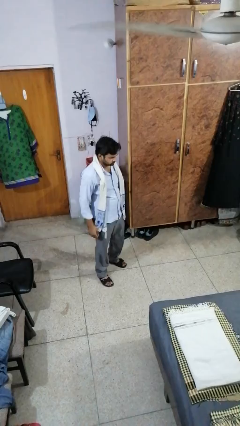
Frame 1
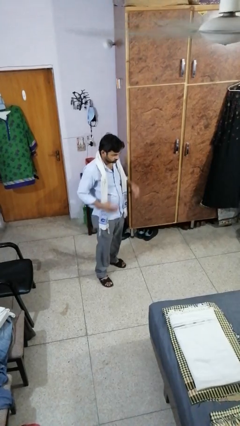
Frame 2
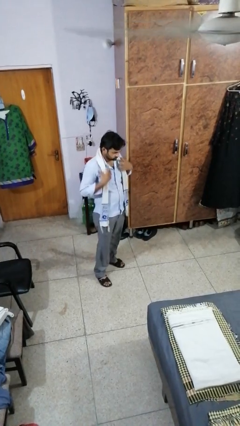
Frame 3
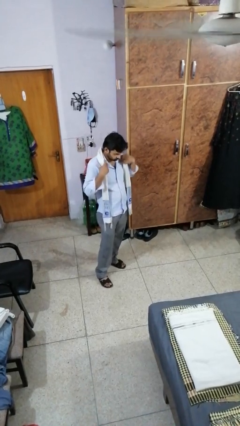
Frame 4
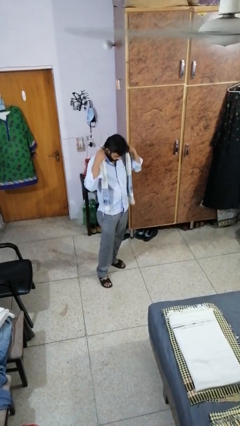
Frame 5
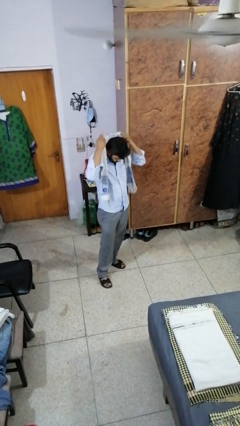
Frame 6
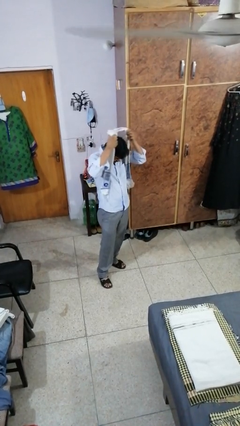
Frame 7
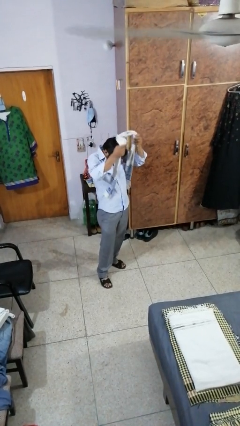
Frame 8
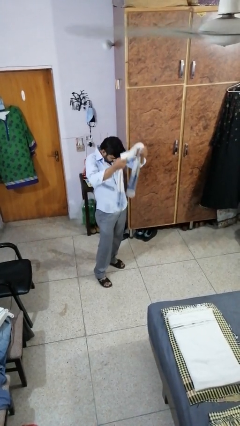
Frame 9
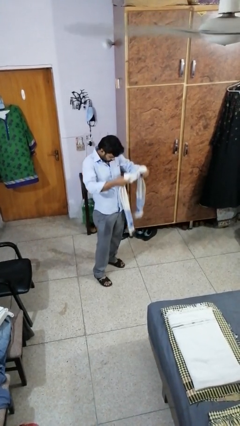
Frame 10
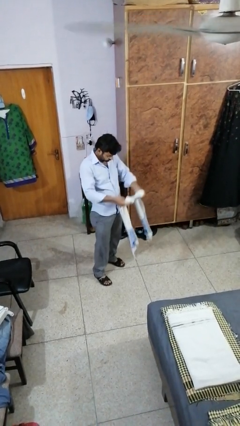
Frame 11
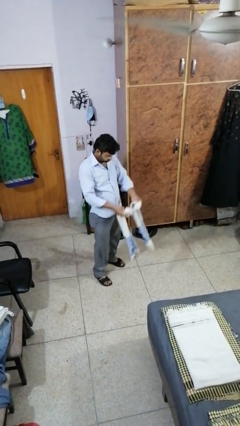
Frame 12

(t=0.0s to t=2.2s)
person takes off scarf

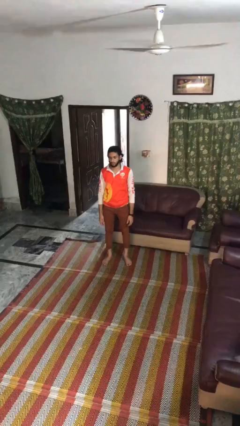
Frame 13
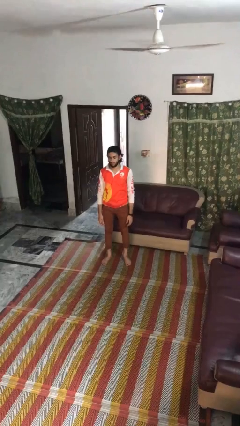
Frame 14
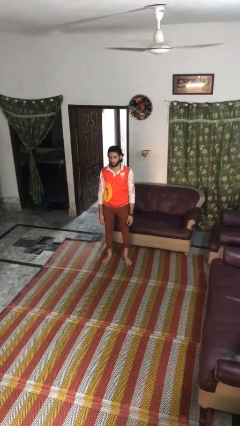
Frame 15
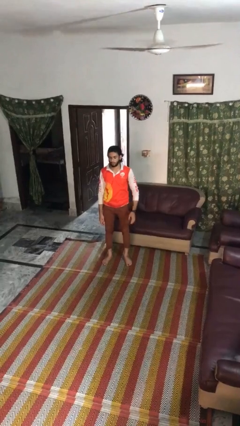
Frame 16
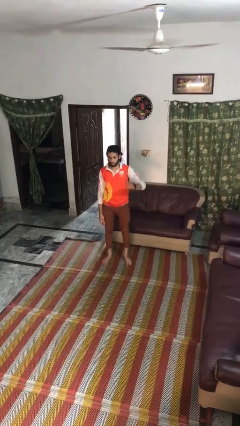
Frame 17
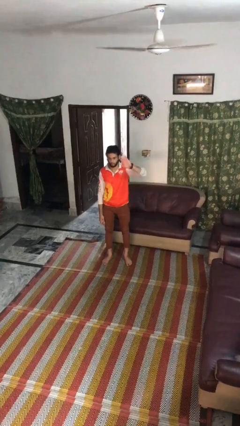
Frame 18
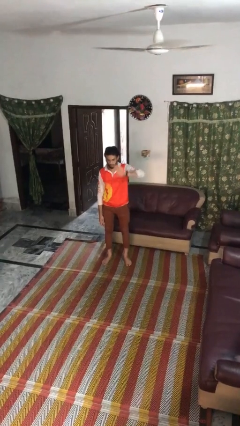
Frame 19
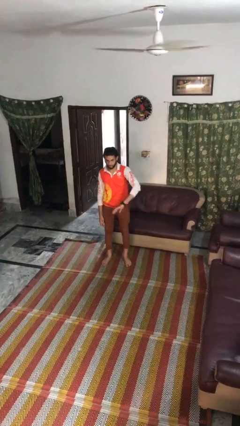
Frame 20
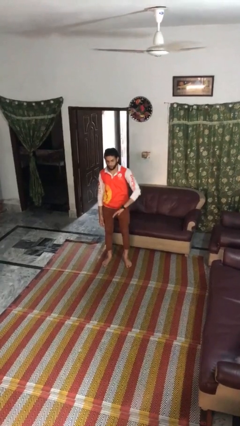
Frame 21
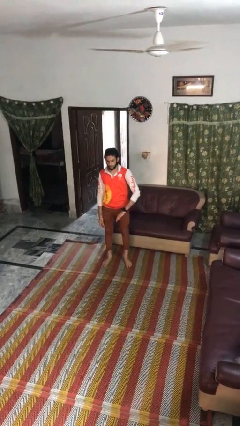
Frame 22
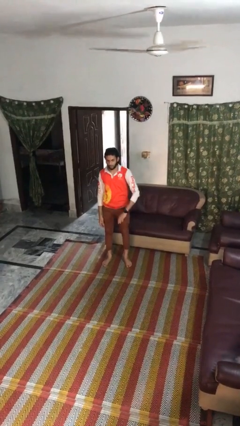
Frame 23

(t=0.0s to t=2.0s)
person gestures swipe down

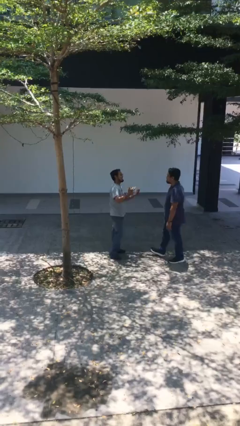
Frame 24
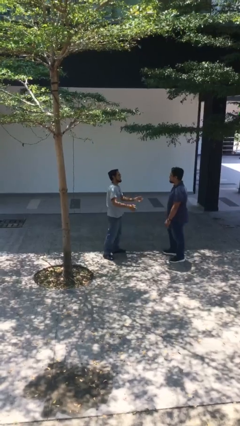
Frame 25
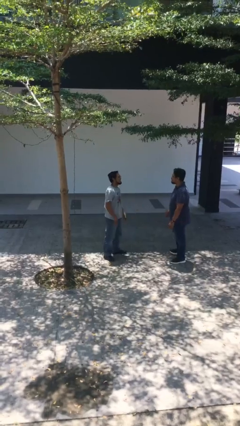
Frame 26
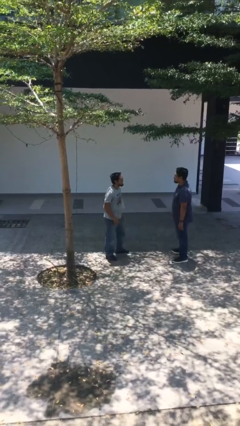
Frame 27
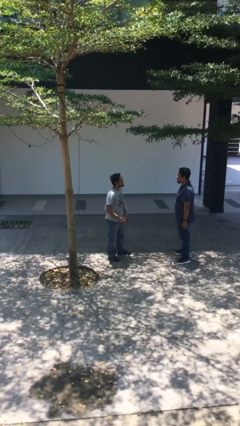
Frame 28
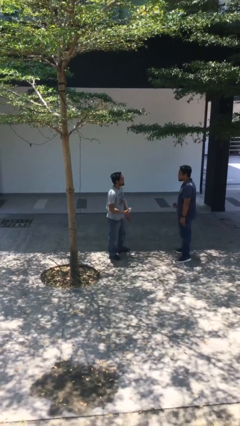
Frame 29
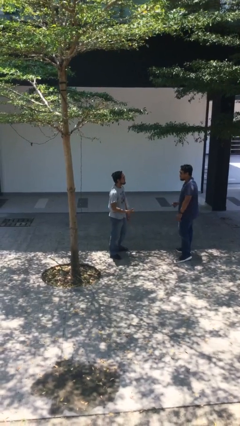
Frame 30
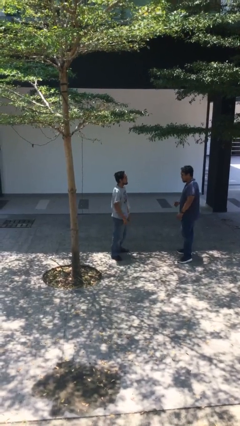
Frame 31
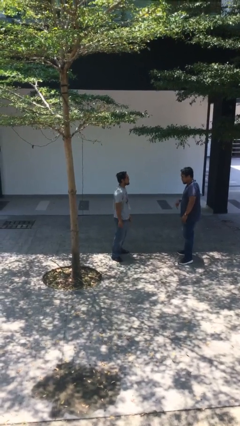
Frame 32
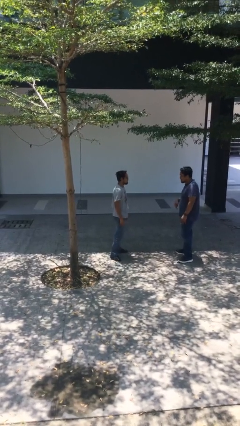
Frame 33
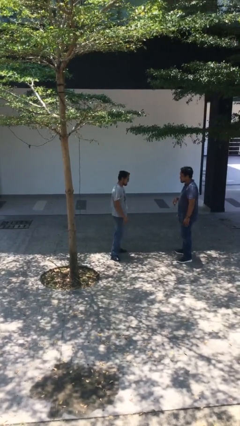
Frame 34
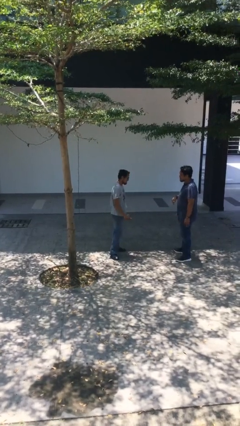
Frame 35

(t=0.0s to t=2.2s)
person talks to person

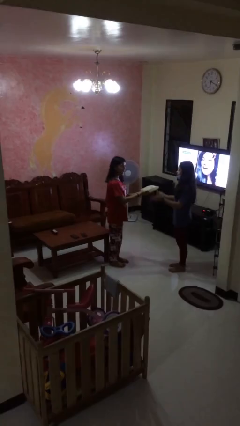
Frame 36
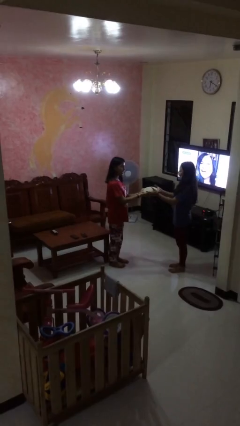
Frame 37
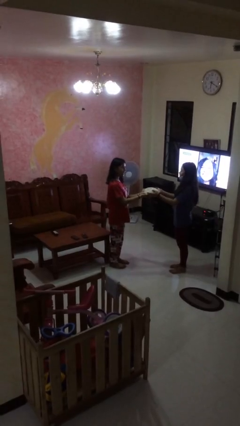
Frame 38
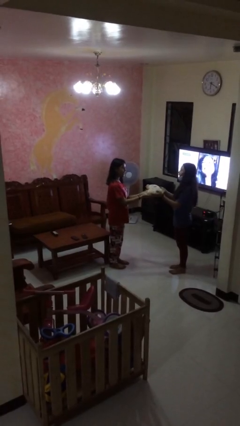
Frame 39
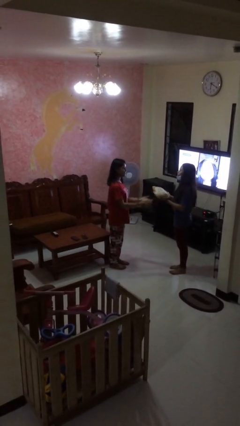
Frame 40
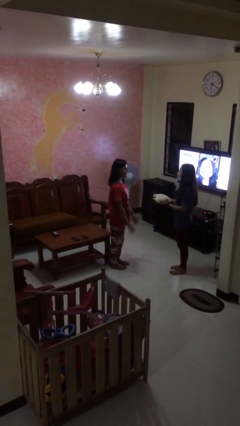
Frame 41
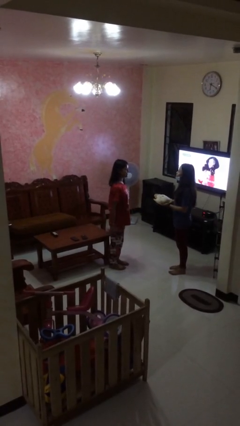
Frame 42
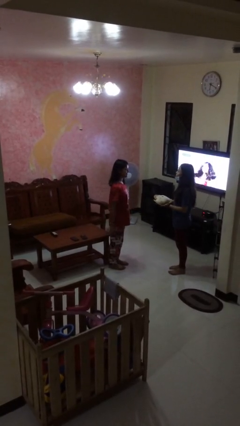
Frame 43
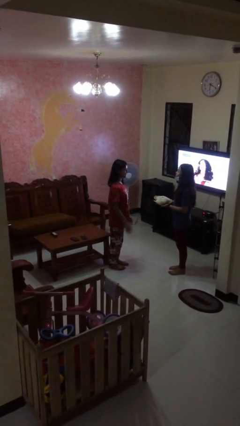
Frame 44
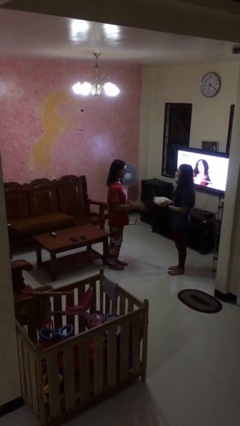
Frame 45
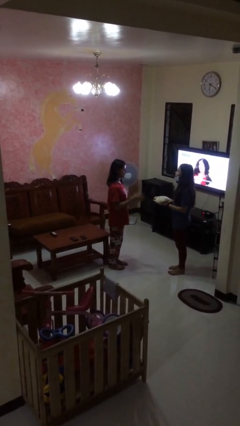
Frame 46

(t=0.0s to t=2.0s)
person transfers object to person

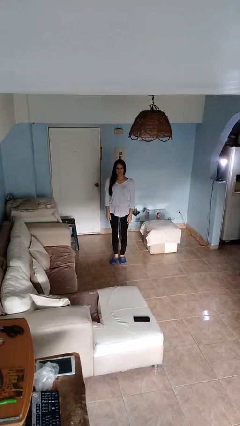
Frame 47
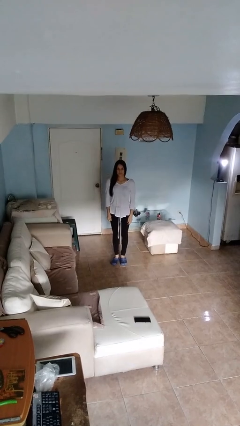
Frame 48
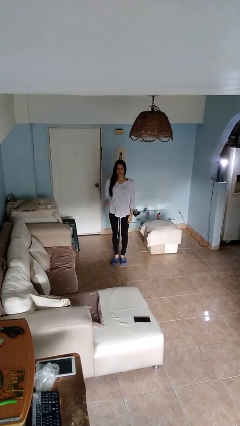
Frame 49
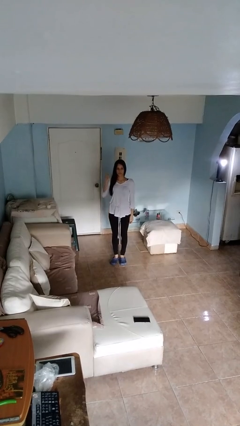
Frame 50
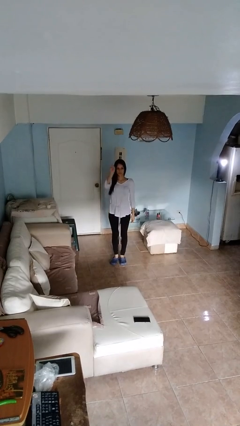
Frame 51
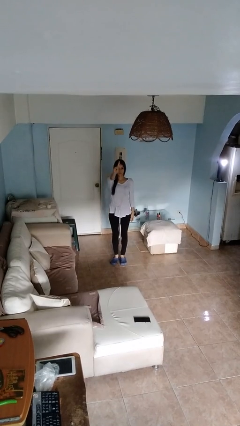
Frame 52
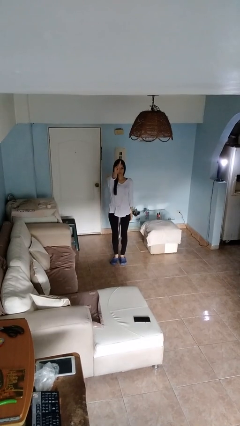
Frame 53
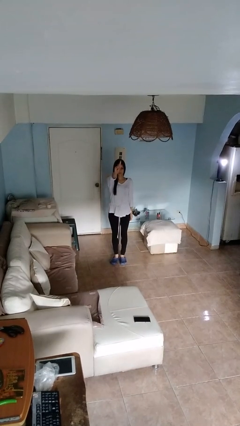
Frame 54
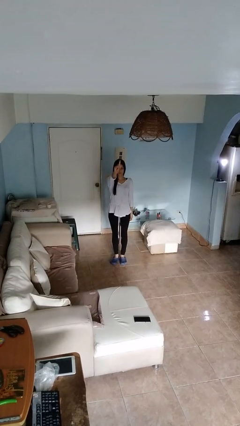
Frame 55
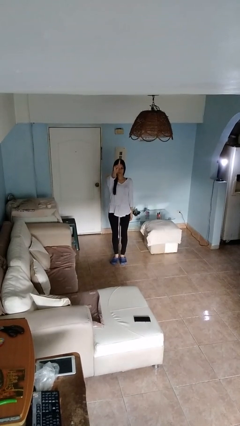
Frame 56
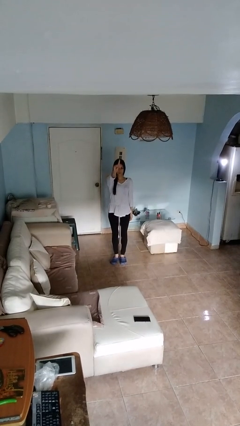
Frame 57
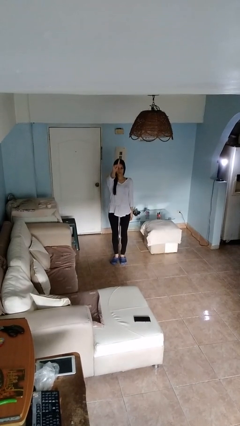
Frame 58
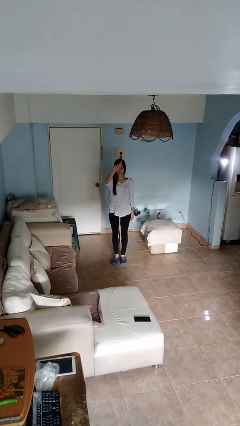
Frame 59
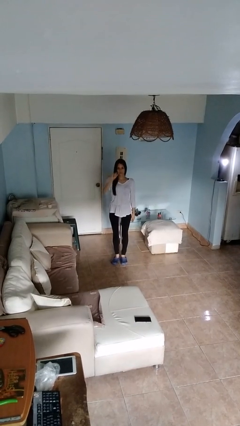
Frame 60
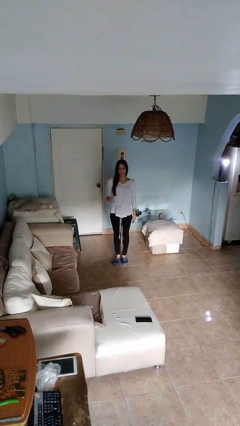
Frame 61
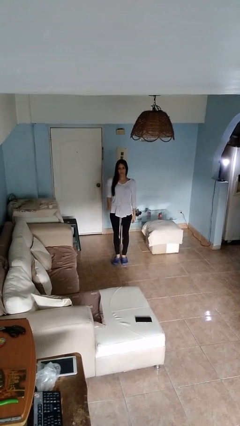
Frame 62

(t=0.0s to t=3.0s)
person gestures number one

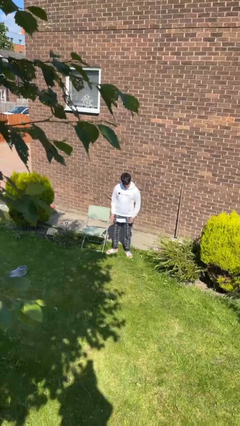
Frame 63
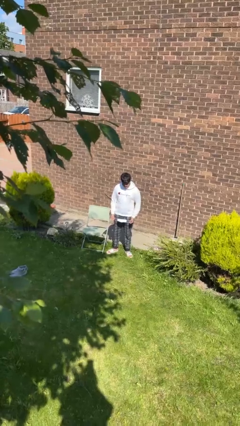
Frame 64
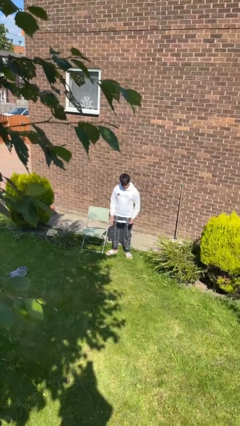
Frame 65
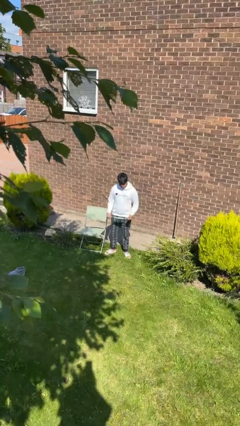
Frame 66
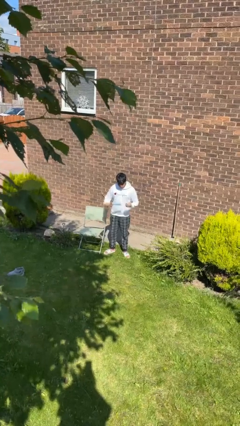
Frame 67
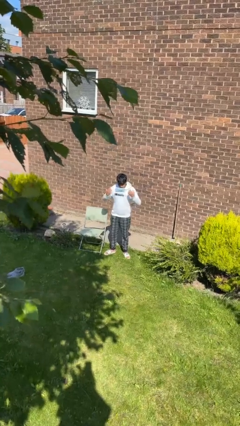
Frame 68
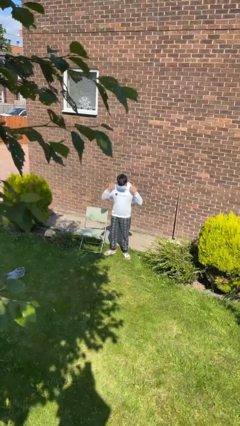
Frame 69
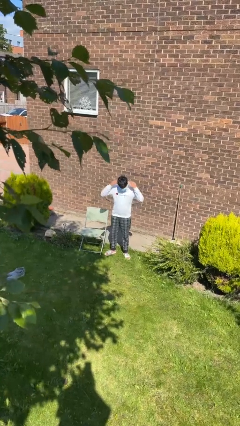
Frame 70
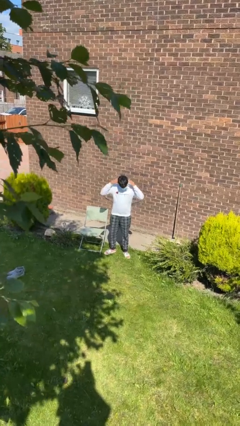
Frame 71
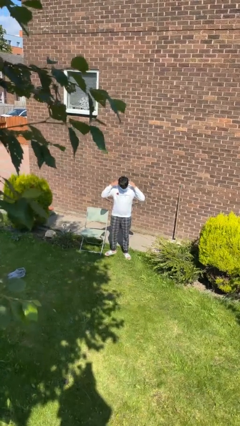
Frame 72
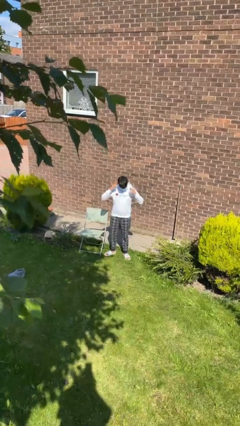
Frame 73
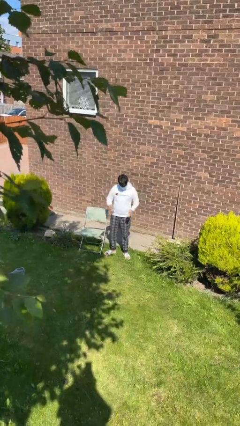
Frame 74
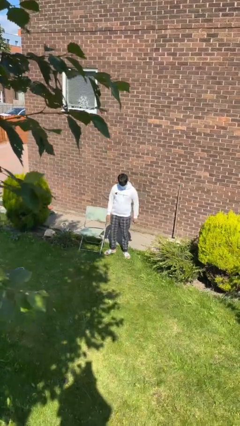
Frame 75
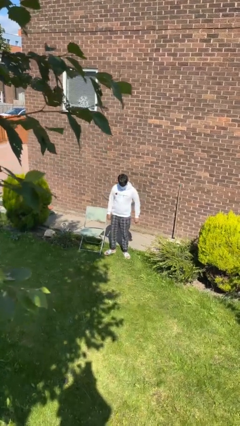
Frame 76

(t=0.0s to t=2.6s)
person puts on facemask

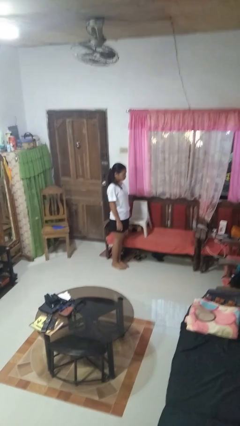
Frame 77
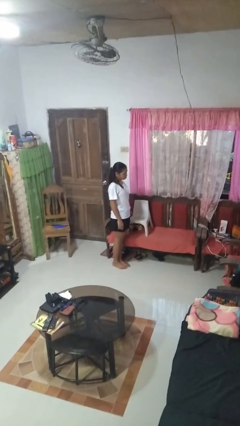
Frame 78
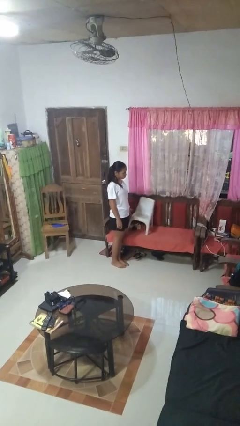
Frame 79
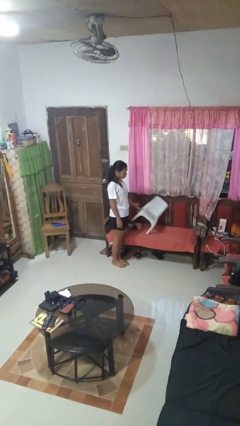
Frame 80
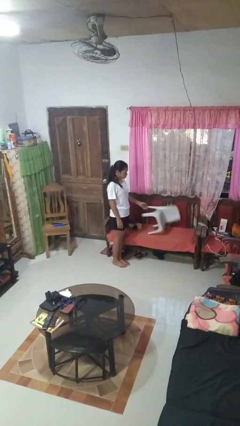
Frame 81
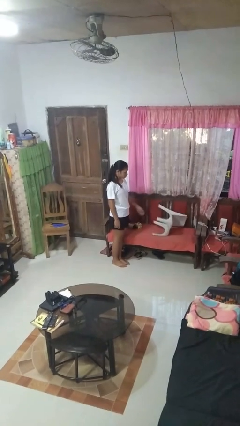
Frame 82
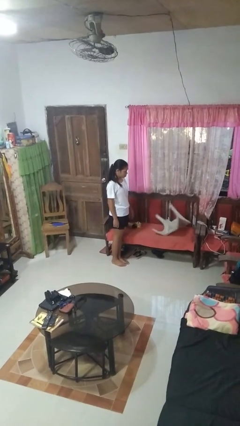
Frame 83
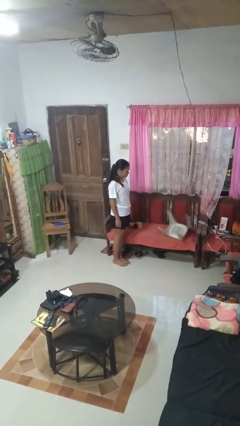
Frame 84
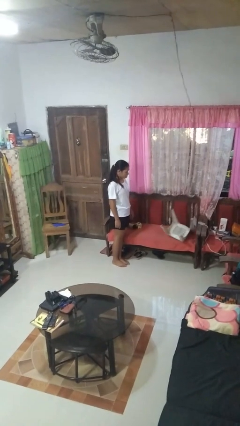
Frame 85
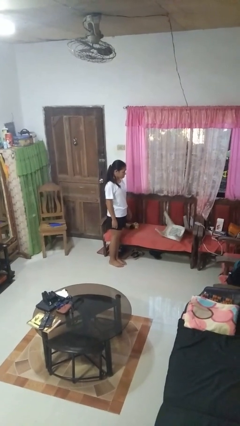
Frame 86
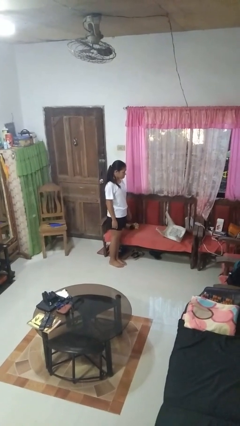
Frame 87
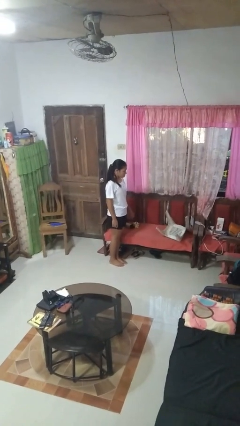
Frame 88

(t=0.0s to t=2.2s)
person knocks over furniture

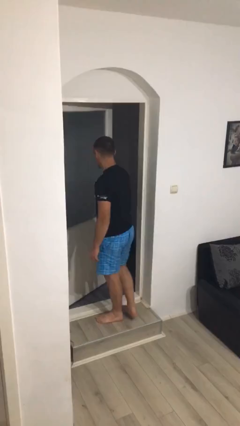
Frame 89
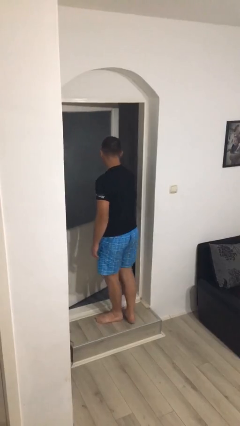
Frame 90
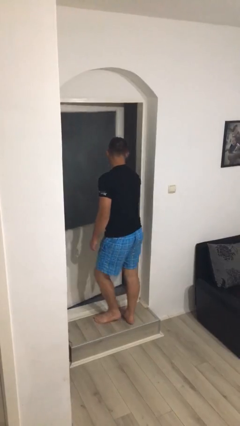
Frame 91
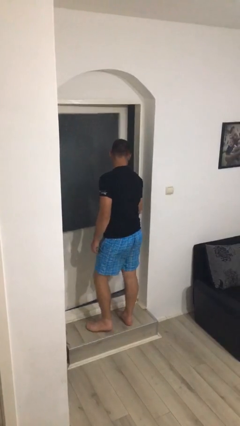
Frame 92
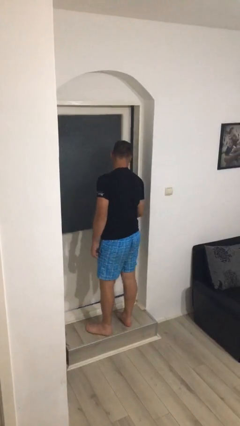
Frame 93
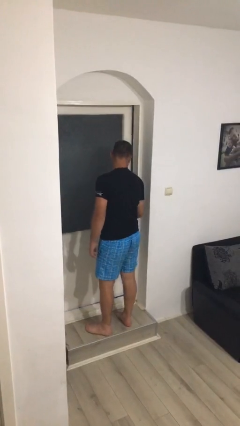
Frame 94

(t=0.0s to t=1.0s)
person enters scene through structure
